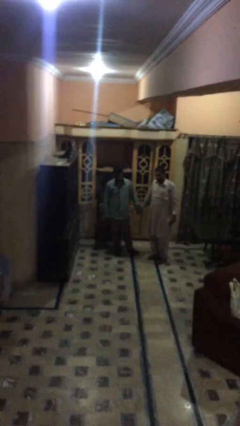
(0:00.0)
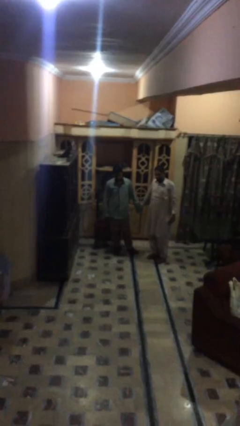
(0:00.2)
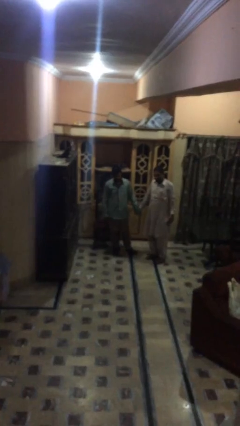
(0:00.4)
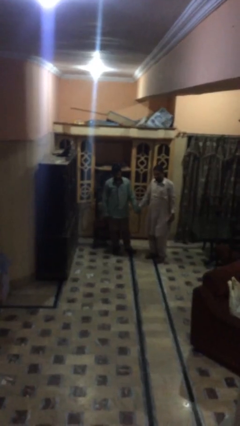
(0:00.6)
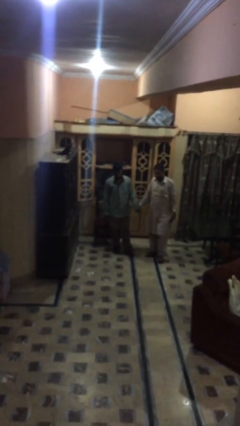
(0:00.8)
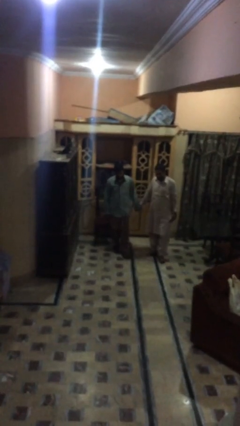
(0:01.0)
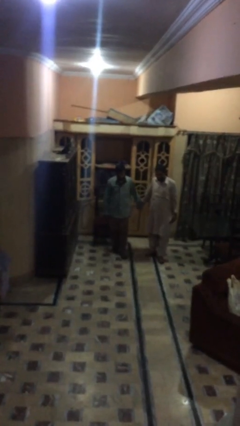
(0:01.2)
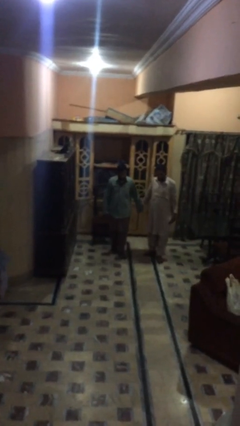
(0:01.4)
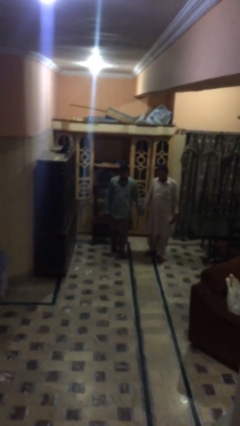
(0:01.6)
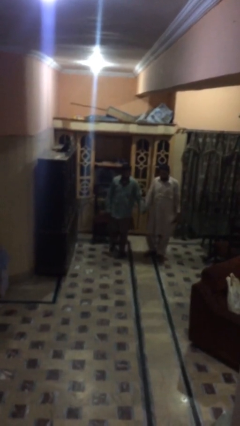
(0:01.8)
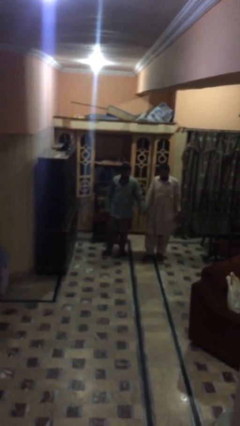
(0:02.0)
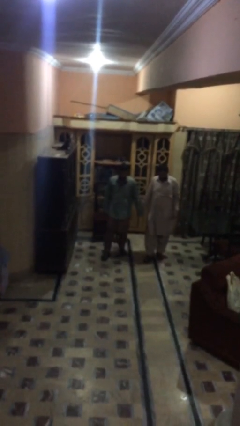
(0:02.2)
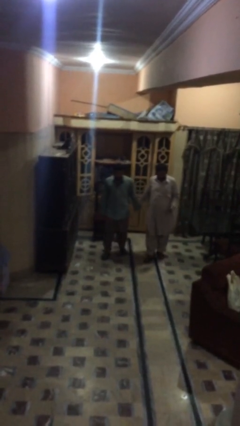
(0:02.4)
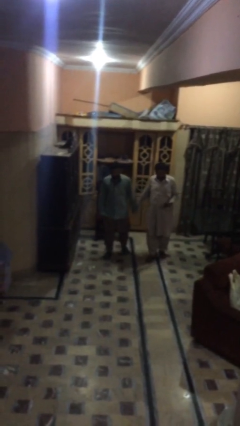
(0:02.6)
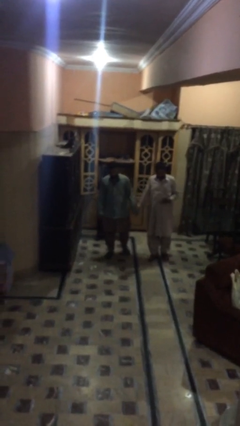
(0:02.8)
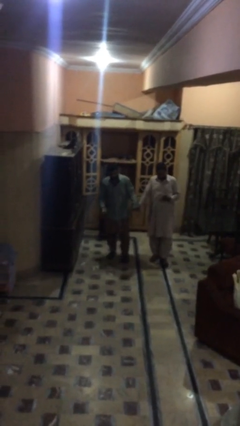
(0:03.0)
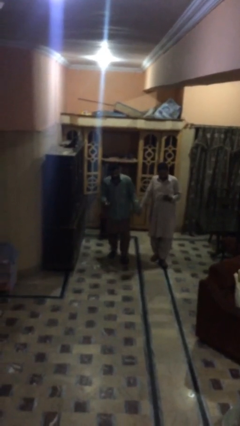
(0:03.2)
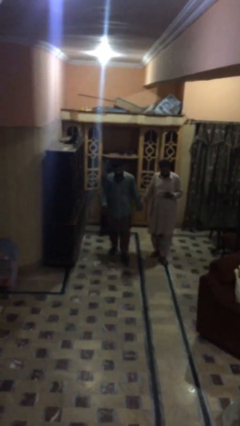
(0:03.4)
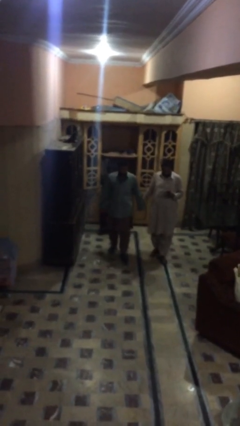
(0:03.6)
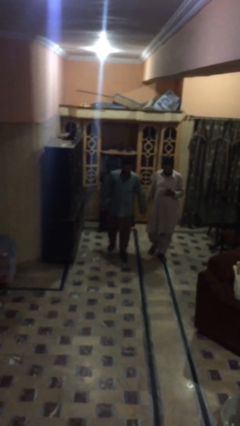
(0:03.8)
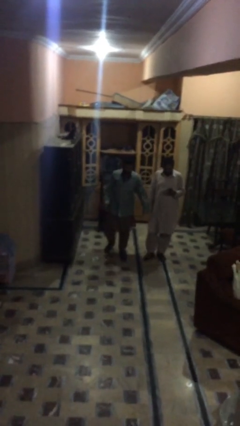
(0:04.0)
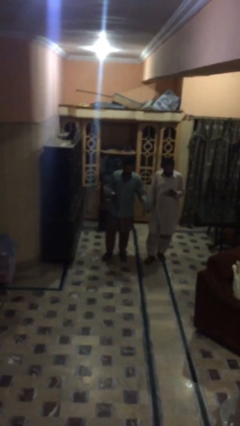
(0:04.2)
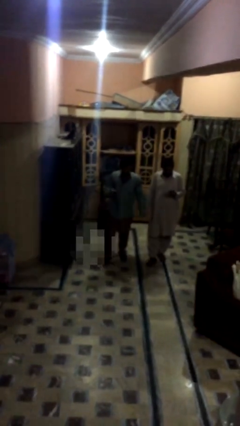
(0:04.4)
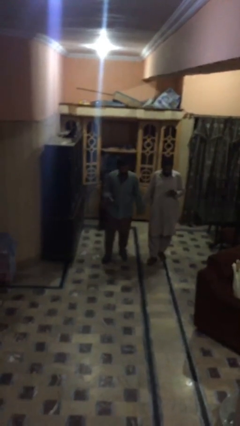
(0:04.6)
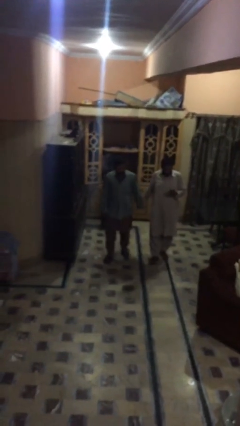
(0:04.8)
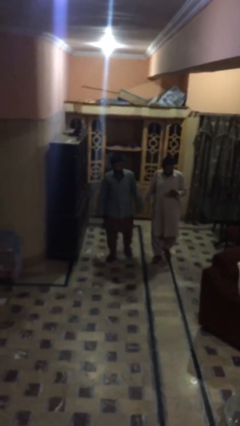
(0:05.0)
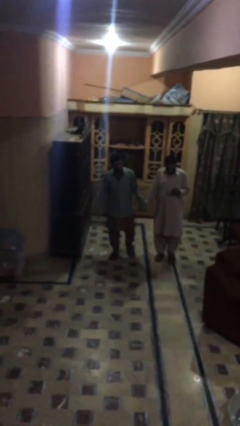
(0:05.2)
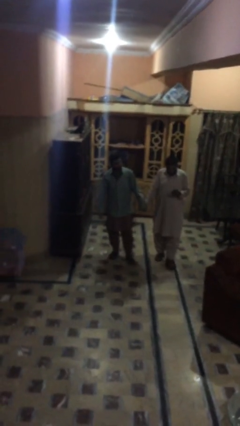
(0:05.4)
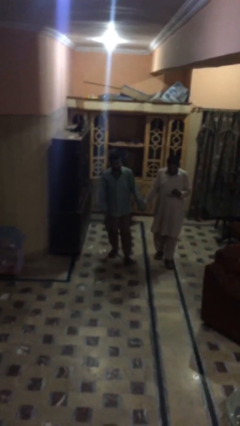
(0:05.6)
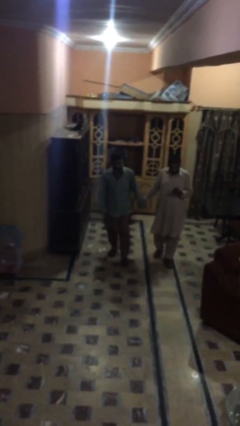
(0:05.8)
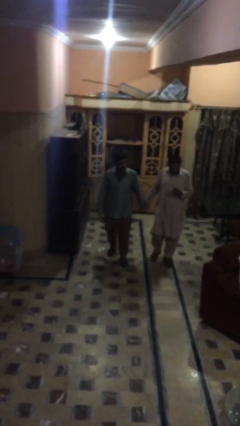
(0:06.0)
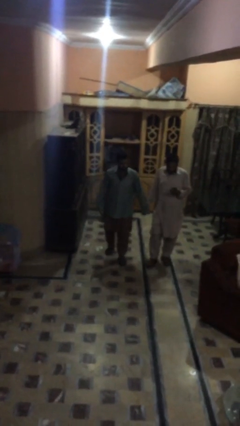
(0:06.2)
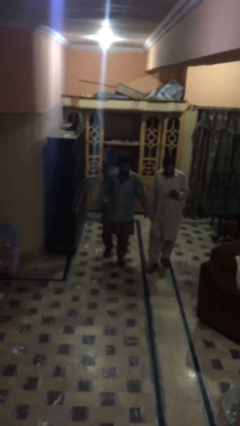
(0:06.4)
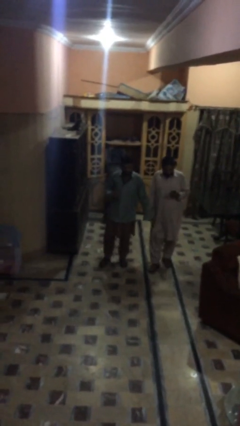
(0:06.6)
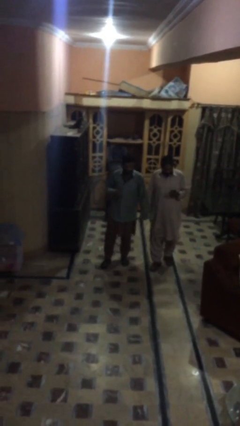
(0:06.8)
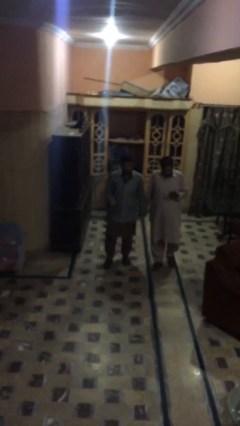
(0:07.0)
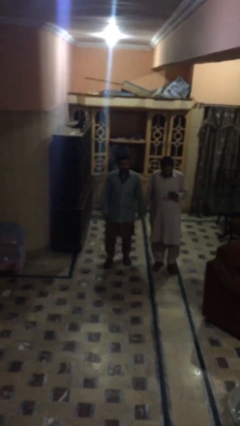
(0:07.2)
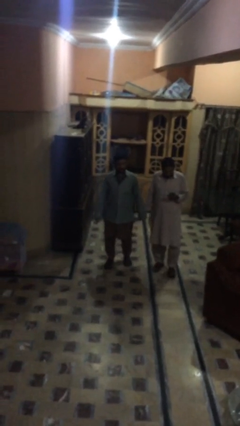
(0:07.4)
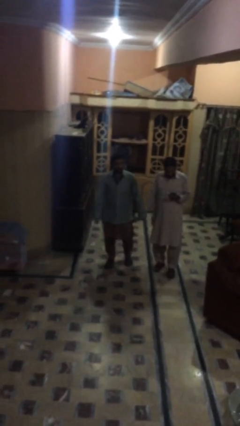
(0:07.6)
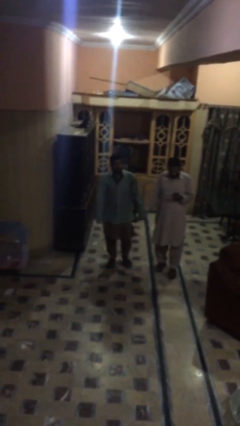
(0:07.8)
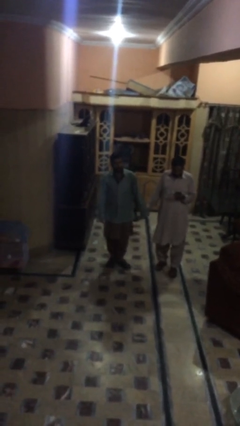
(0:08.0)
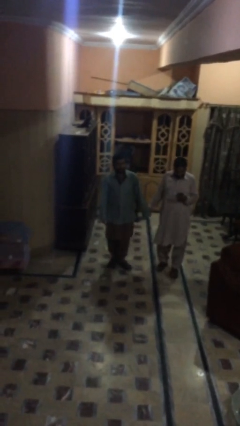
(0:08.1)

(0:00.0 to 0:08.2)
person holds hand

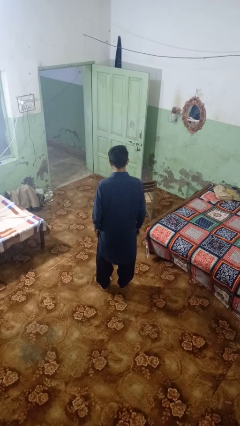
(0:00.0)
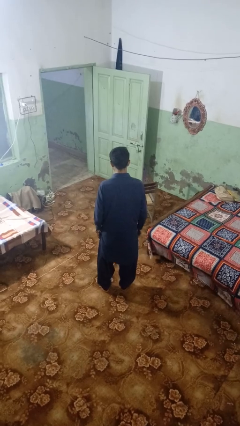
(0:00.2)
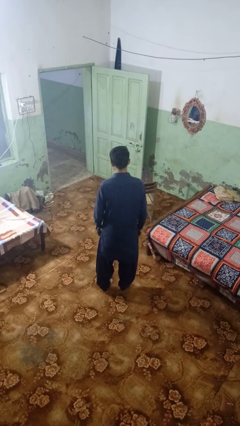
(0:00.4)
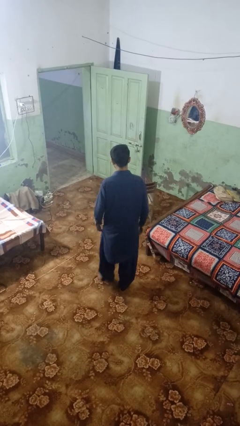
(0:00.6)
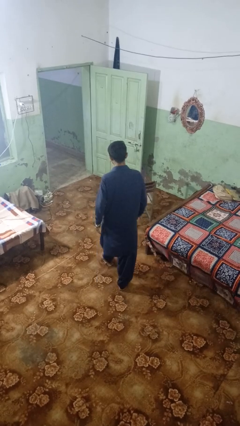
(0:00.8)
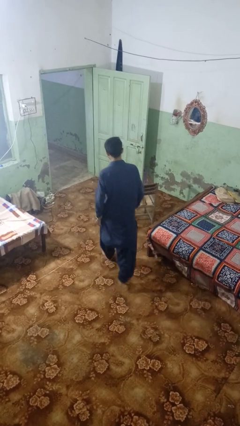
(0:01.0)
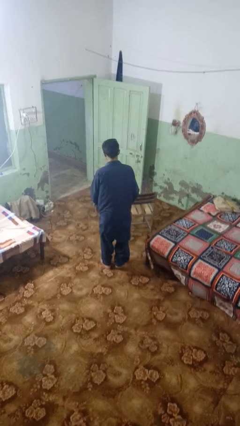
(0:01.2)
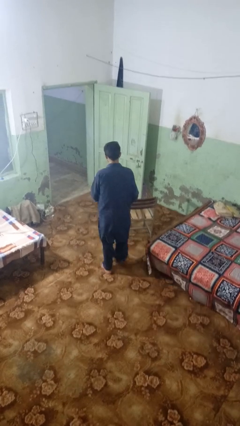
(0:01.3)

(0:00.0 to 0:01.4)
person trips on object on floor

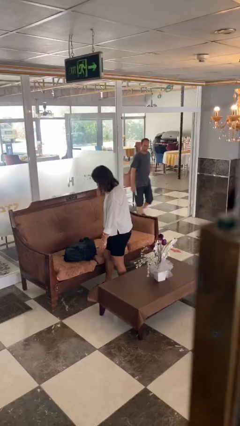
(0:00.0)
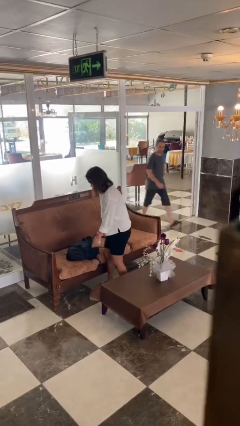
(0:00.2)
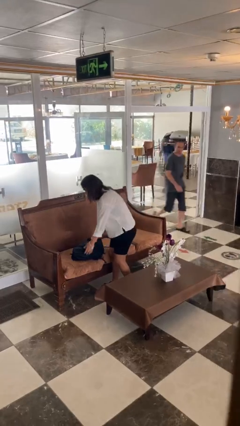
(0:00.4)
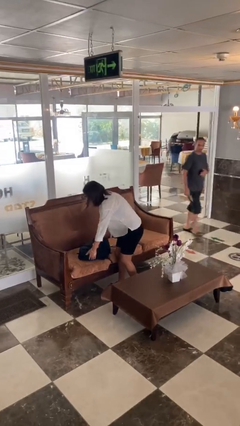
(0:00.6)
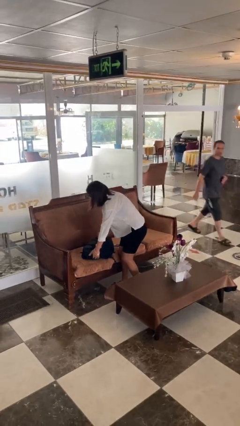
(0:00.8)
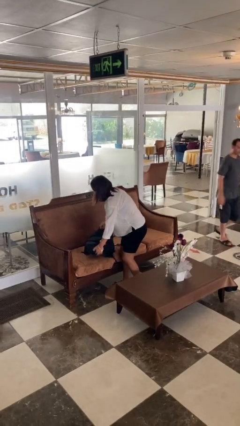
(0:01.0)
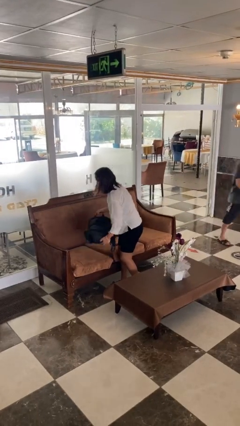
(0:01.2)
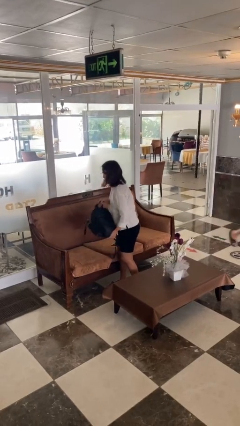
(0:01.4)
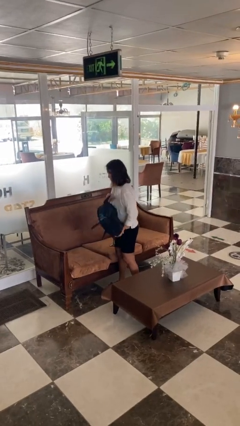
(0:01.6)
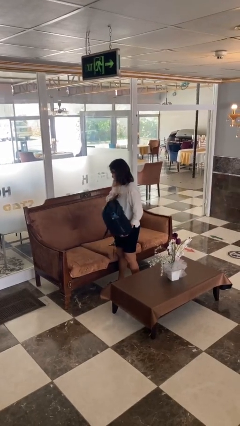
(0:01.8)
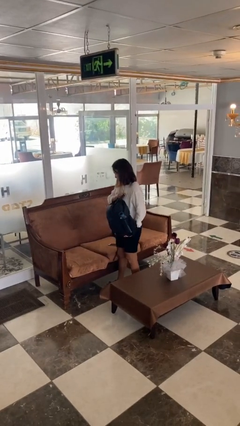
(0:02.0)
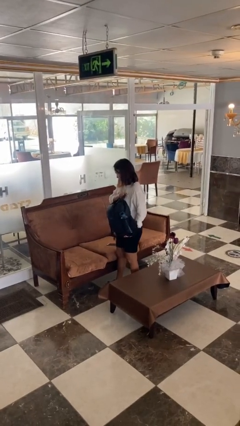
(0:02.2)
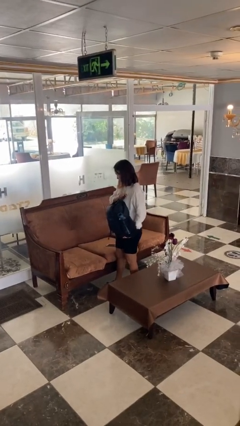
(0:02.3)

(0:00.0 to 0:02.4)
person picks up object from couch

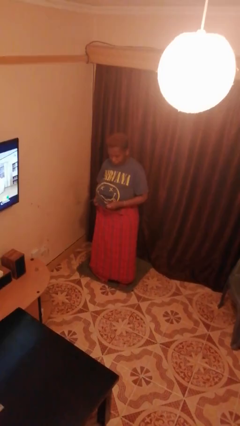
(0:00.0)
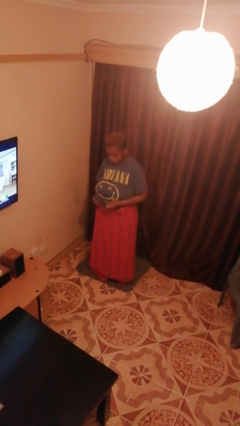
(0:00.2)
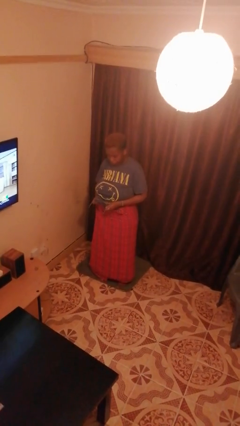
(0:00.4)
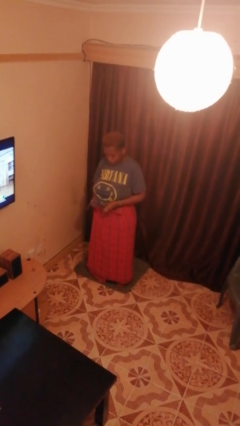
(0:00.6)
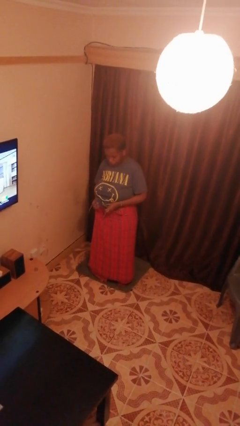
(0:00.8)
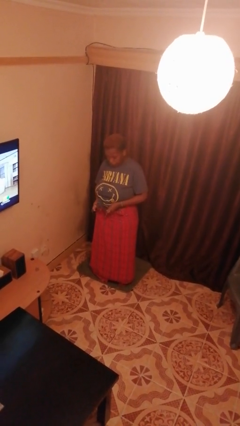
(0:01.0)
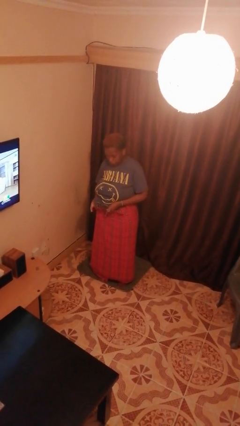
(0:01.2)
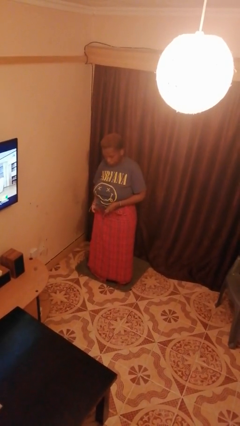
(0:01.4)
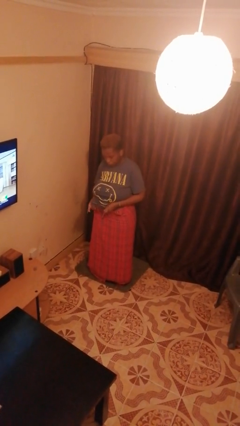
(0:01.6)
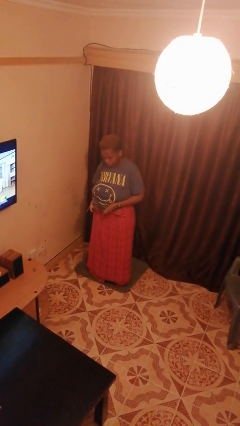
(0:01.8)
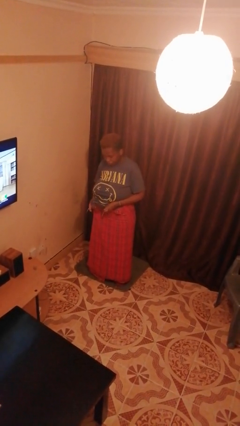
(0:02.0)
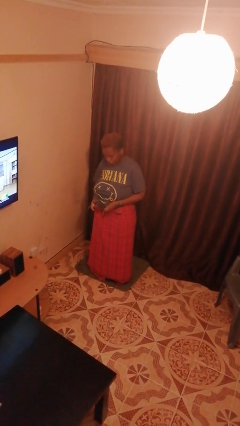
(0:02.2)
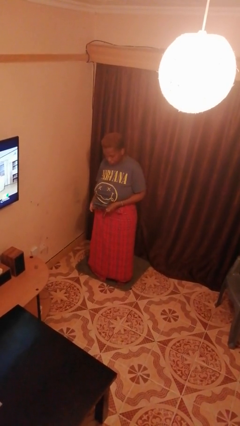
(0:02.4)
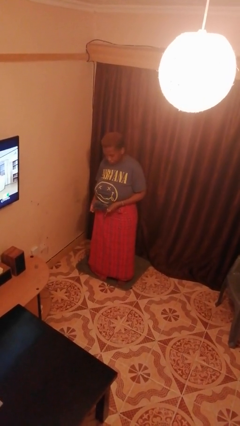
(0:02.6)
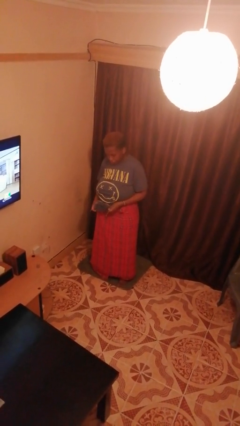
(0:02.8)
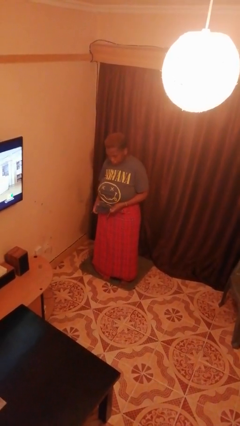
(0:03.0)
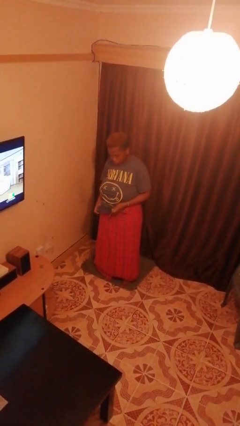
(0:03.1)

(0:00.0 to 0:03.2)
person cleans eyeglasses

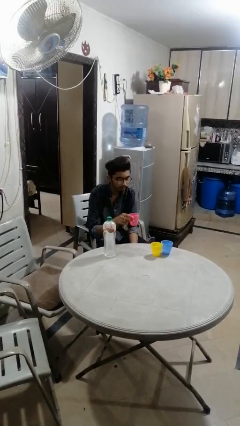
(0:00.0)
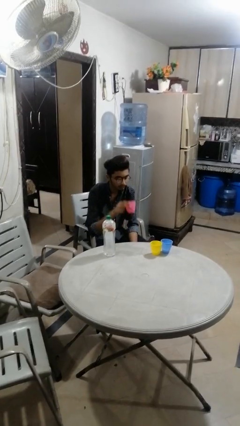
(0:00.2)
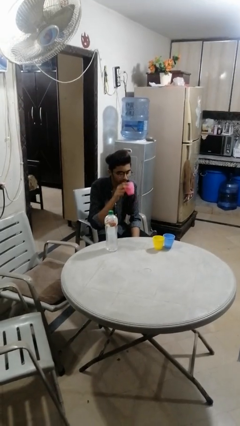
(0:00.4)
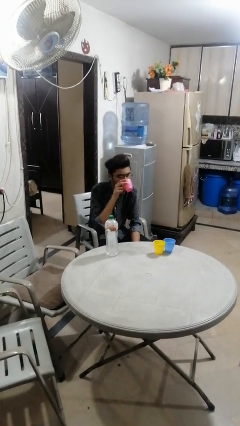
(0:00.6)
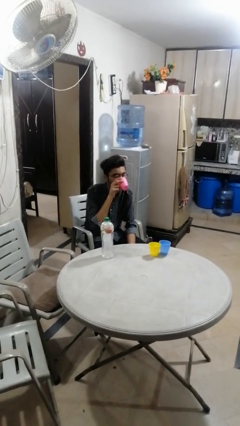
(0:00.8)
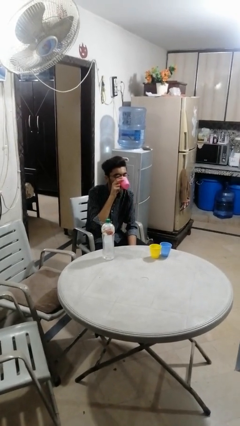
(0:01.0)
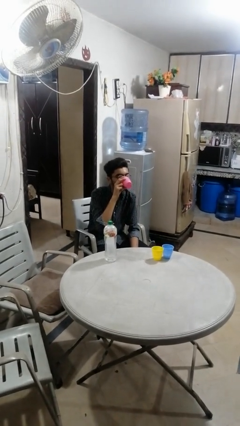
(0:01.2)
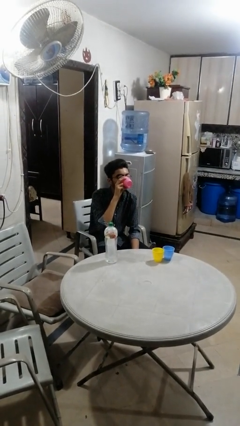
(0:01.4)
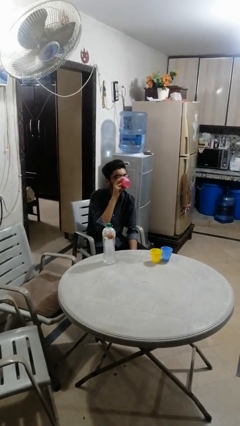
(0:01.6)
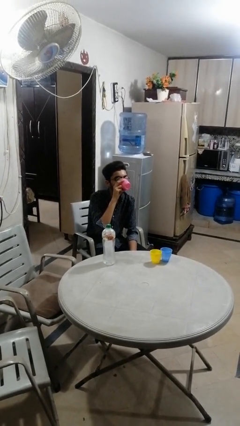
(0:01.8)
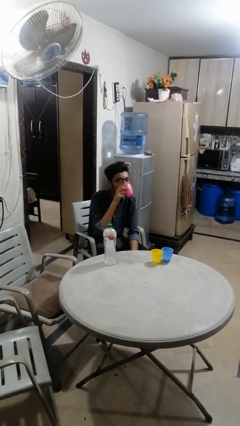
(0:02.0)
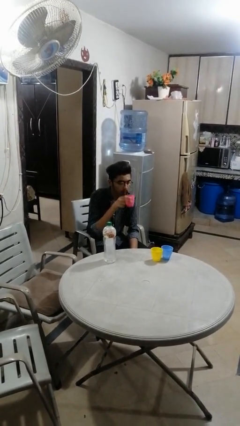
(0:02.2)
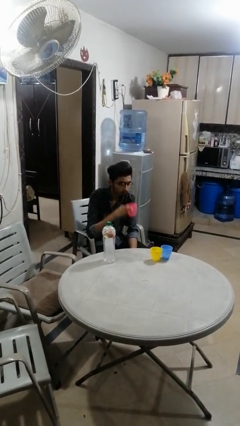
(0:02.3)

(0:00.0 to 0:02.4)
person drinks from shotglass
